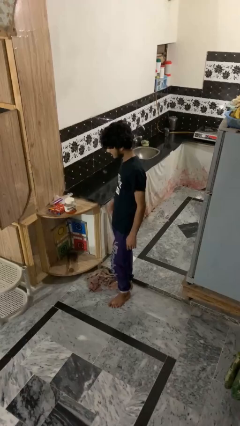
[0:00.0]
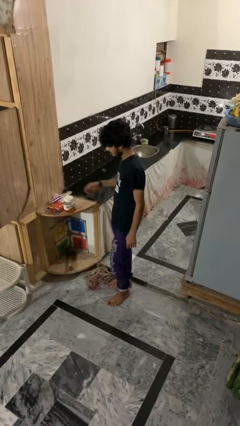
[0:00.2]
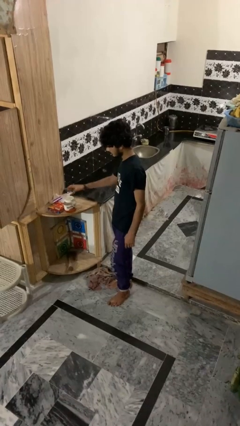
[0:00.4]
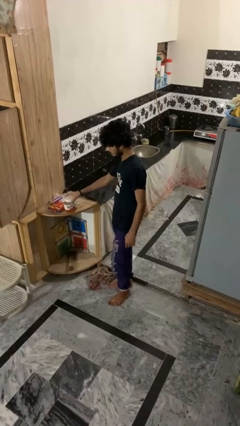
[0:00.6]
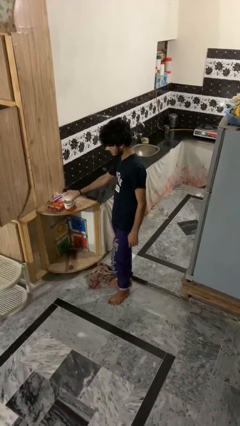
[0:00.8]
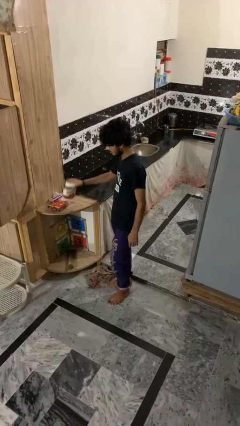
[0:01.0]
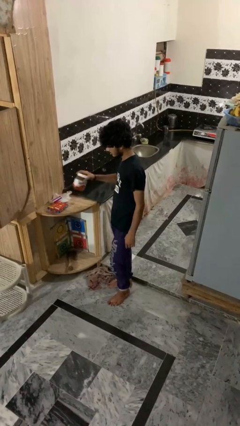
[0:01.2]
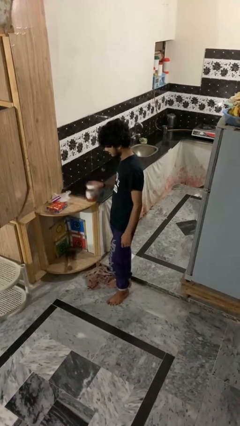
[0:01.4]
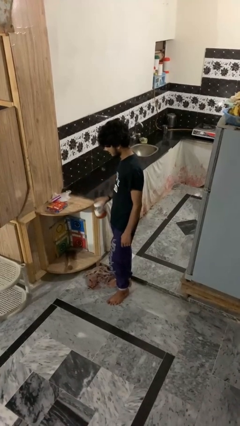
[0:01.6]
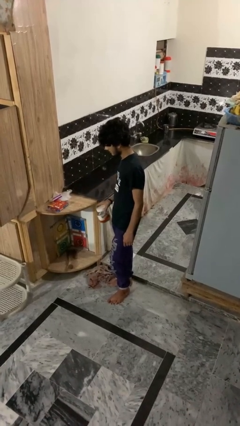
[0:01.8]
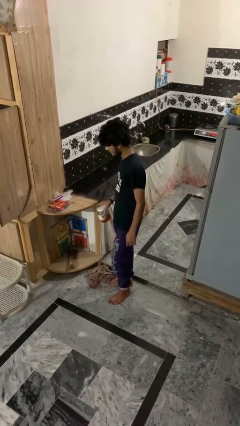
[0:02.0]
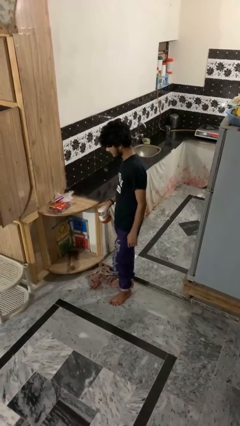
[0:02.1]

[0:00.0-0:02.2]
person picks up object from countertop

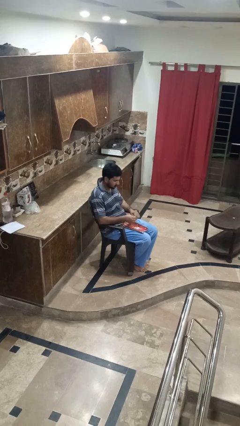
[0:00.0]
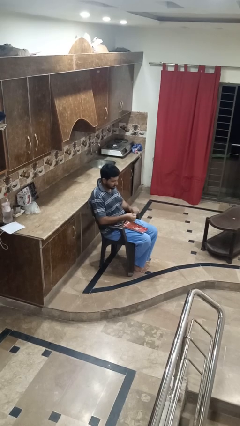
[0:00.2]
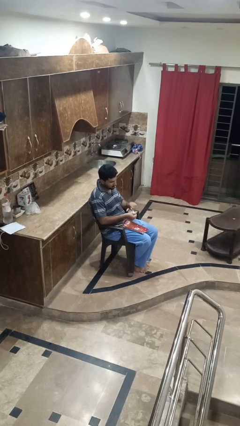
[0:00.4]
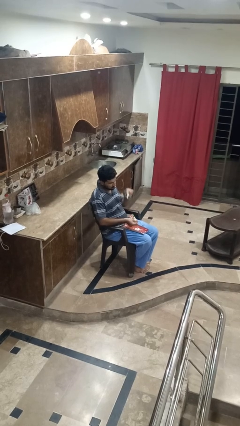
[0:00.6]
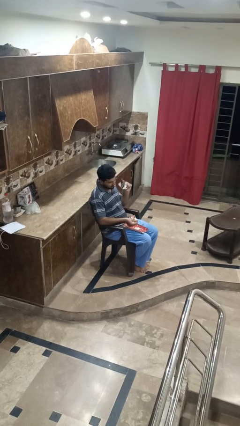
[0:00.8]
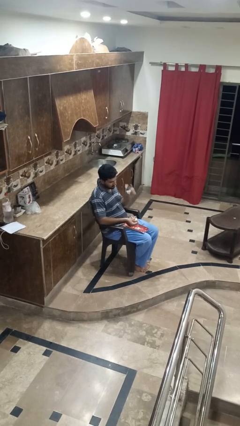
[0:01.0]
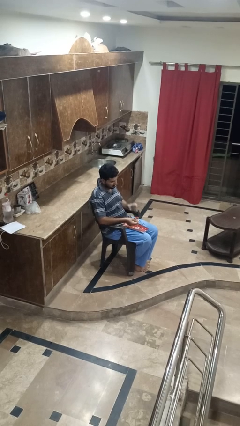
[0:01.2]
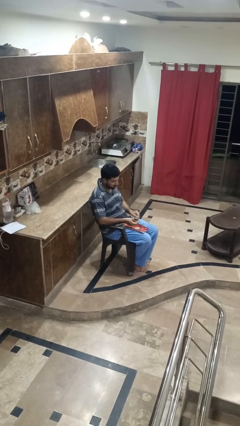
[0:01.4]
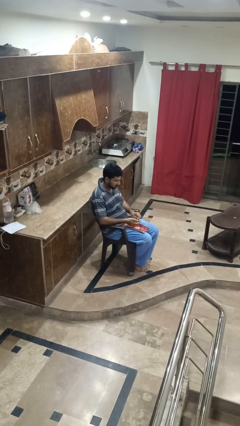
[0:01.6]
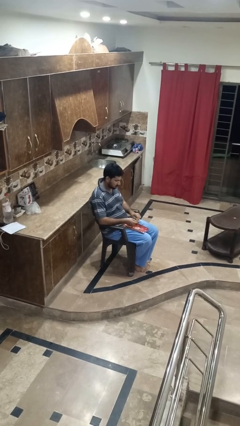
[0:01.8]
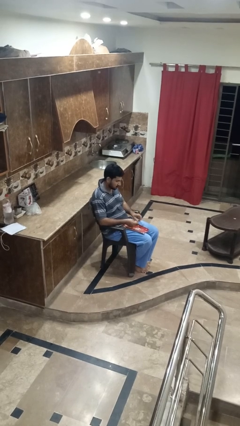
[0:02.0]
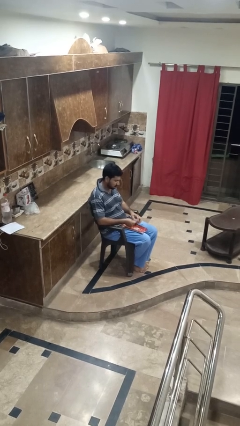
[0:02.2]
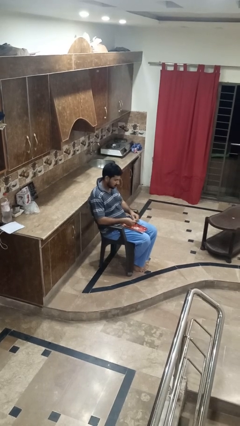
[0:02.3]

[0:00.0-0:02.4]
person tears paper

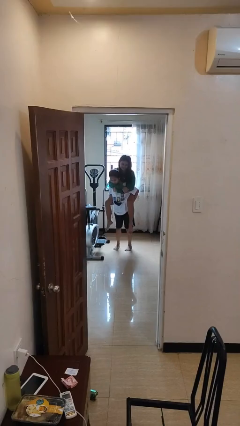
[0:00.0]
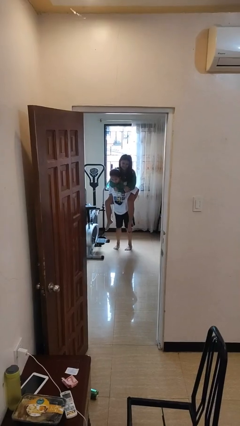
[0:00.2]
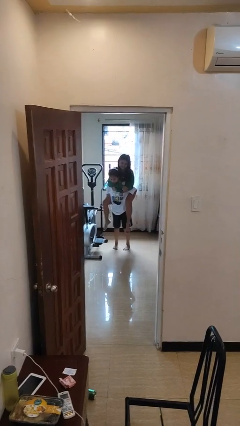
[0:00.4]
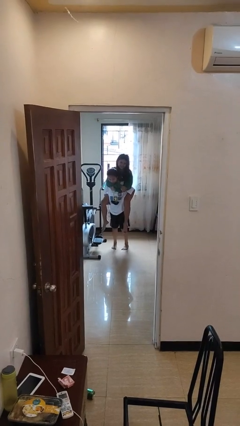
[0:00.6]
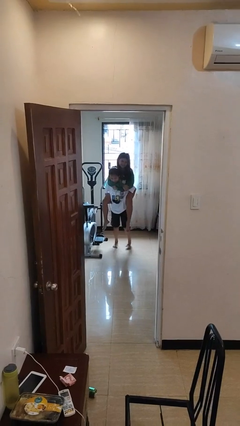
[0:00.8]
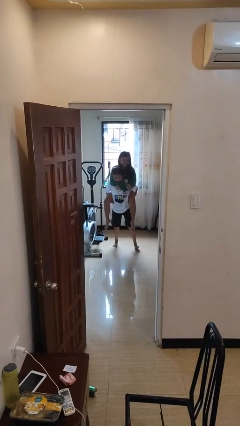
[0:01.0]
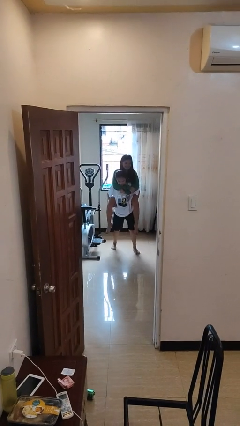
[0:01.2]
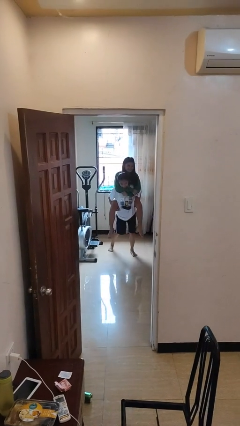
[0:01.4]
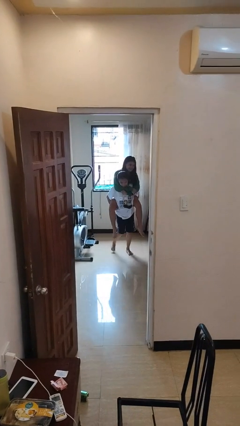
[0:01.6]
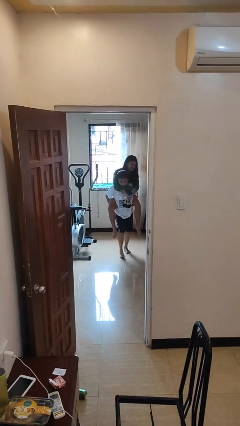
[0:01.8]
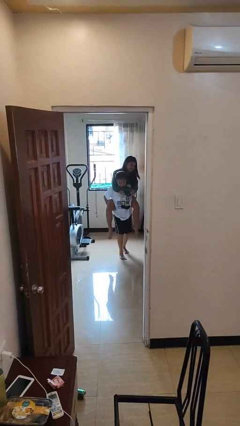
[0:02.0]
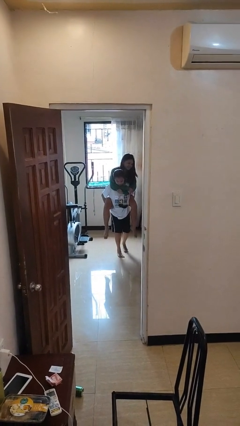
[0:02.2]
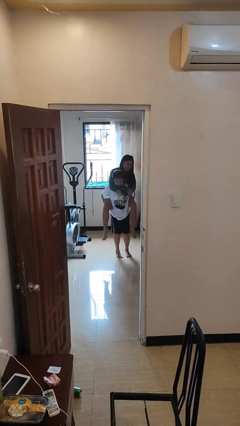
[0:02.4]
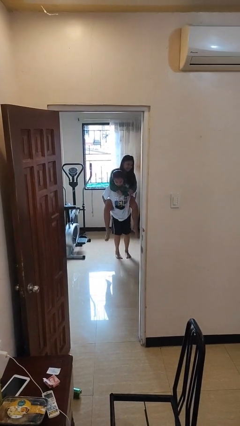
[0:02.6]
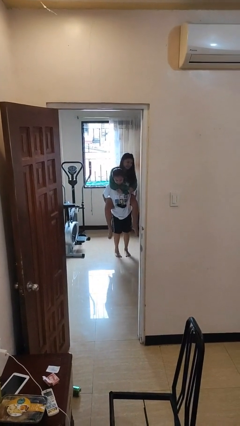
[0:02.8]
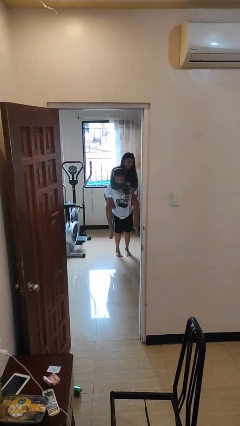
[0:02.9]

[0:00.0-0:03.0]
person carries person on back

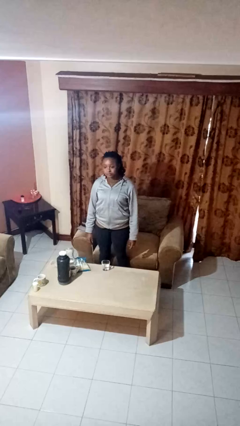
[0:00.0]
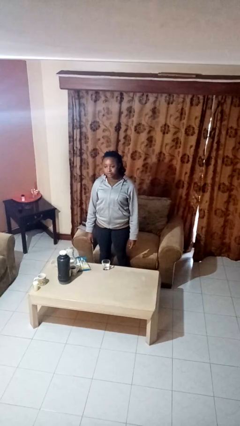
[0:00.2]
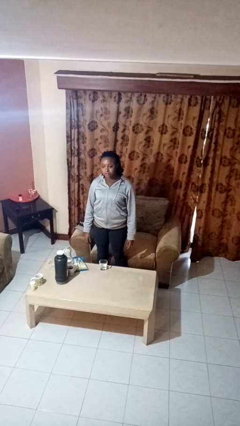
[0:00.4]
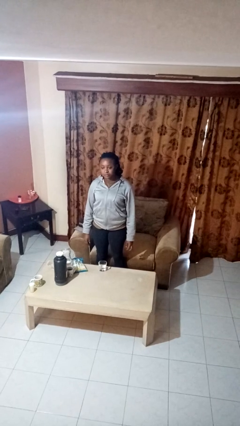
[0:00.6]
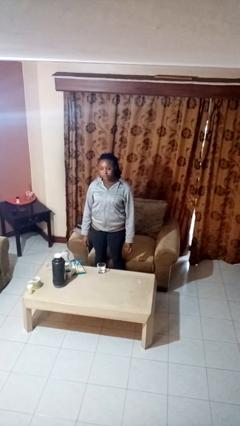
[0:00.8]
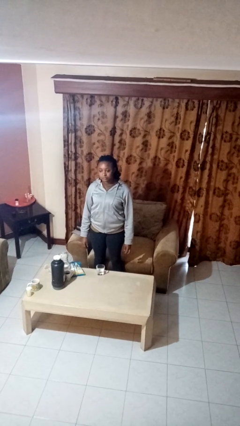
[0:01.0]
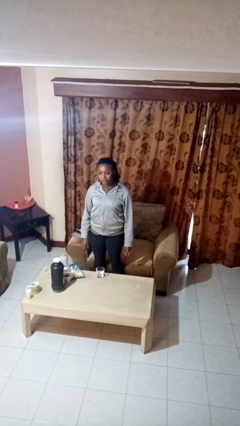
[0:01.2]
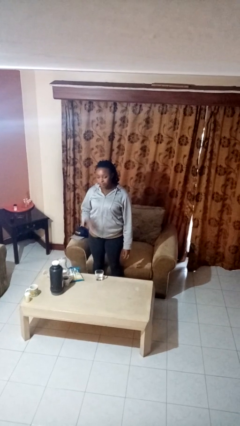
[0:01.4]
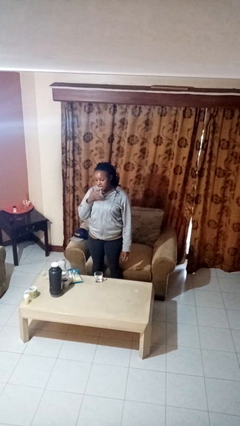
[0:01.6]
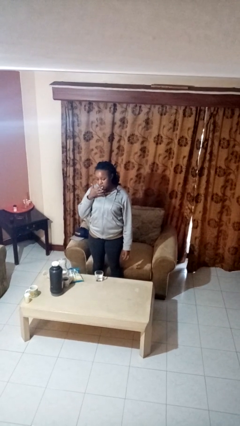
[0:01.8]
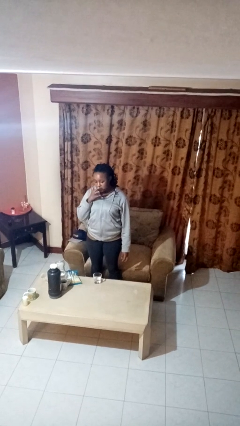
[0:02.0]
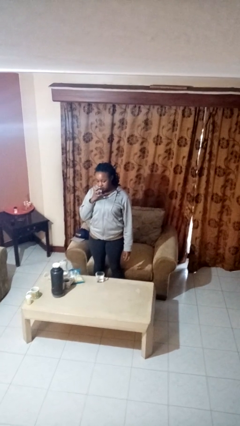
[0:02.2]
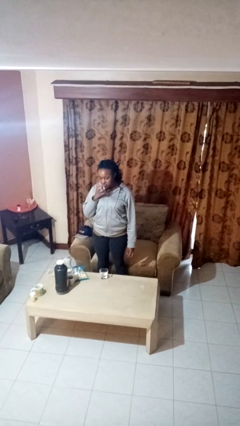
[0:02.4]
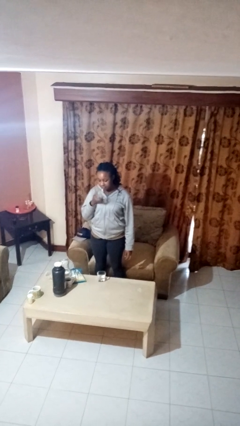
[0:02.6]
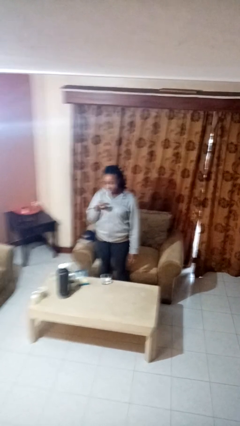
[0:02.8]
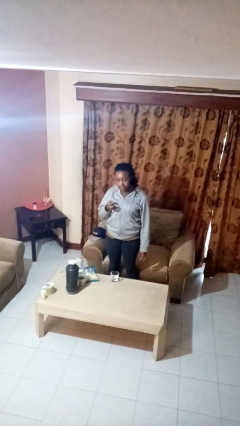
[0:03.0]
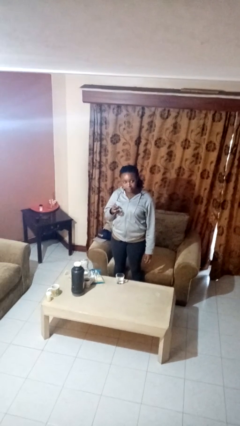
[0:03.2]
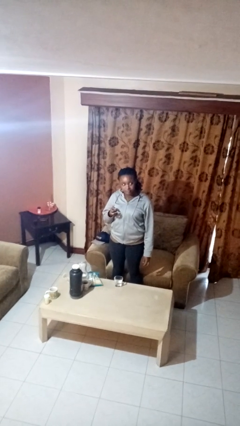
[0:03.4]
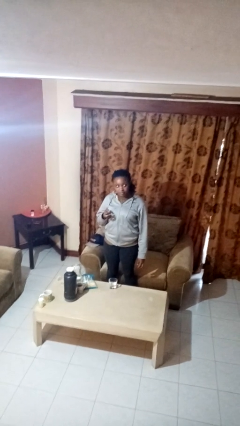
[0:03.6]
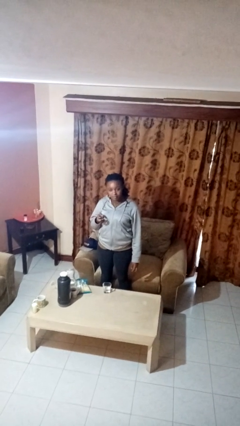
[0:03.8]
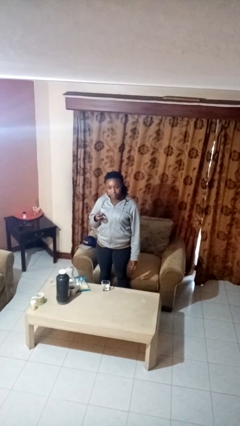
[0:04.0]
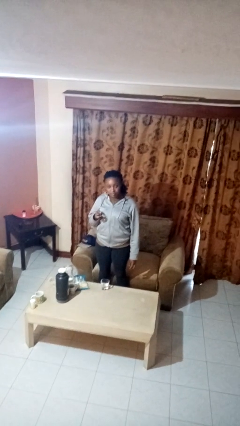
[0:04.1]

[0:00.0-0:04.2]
person licks fingers

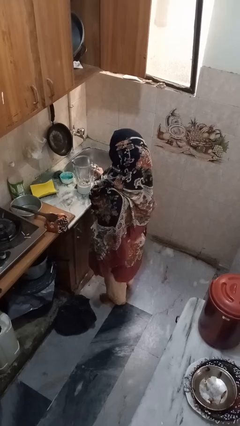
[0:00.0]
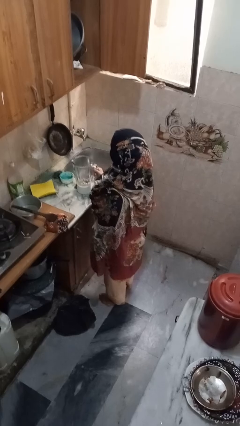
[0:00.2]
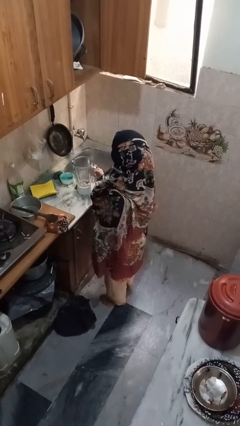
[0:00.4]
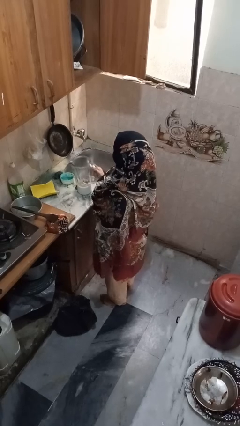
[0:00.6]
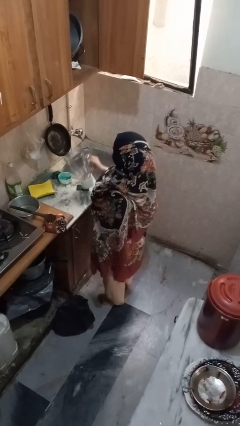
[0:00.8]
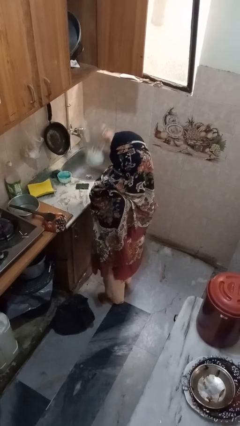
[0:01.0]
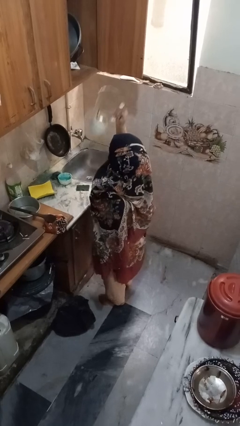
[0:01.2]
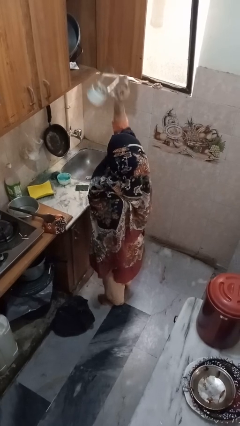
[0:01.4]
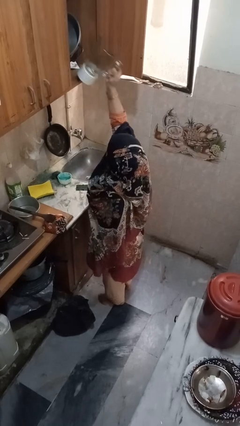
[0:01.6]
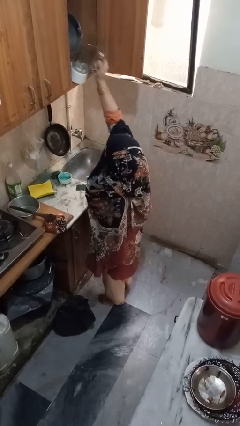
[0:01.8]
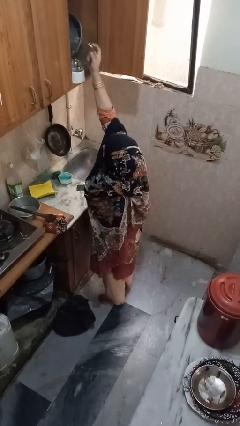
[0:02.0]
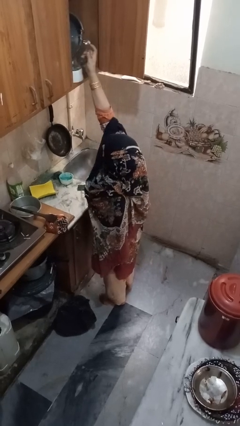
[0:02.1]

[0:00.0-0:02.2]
person takes object from cabinet

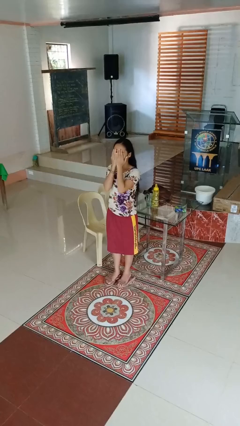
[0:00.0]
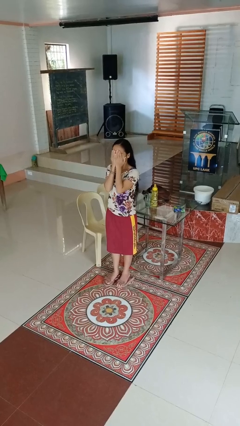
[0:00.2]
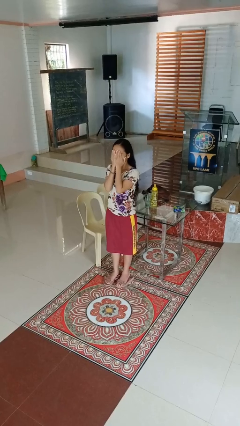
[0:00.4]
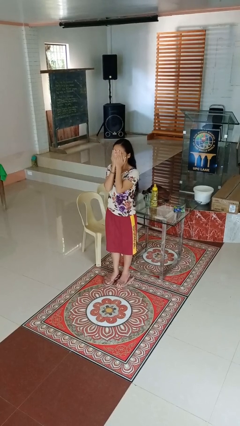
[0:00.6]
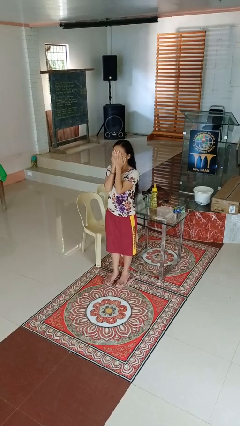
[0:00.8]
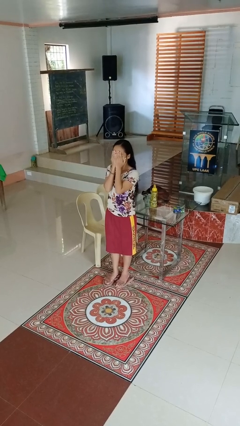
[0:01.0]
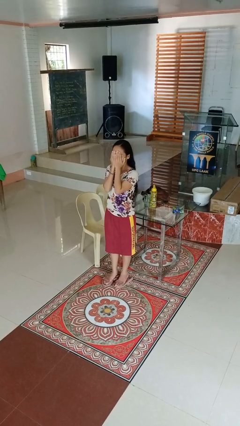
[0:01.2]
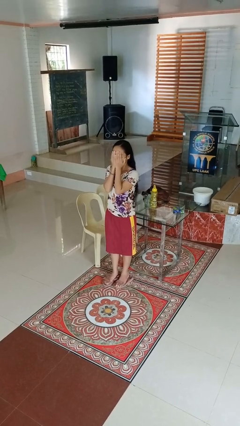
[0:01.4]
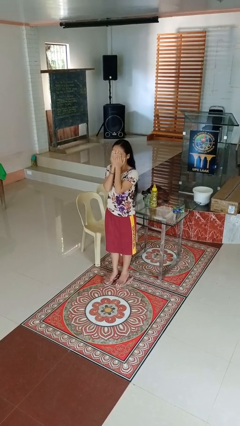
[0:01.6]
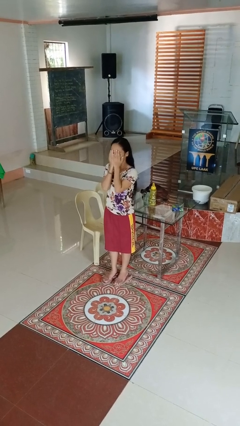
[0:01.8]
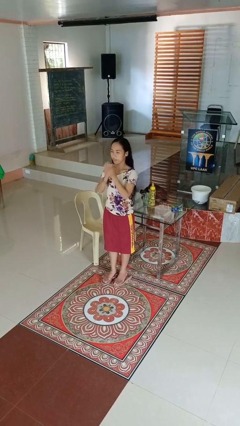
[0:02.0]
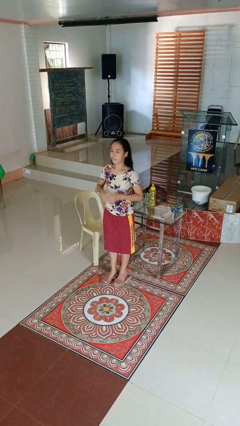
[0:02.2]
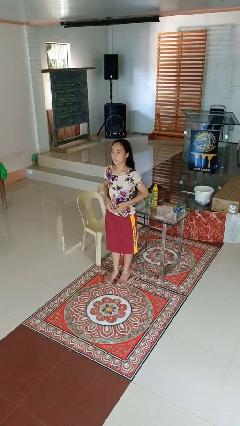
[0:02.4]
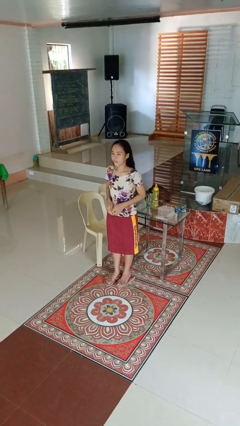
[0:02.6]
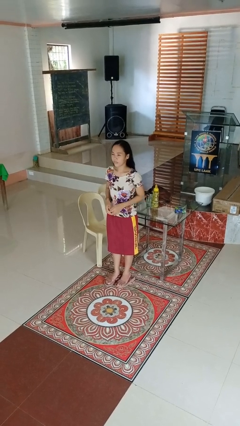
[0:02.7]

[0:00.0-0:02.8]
person covers face with hands

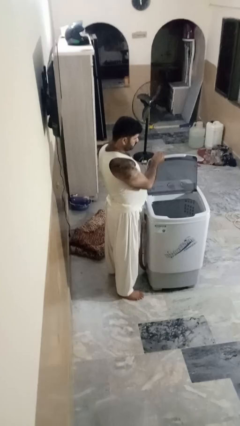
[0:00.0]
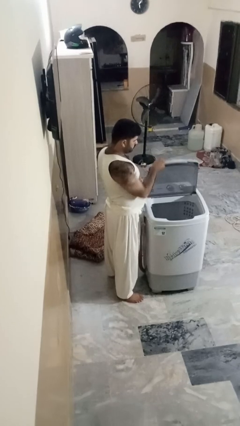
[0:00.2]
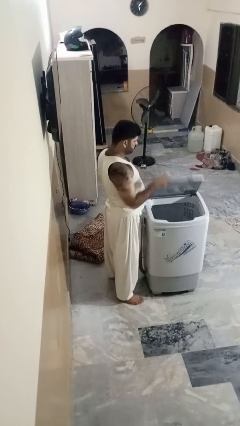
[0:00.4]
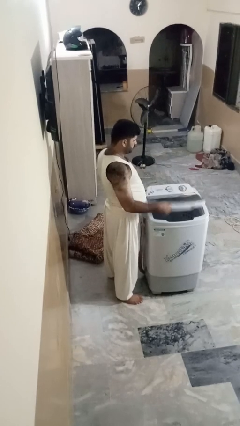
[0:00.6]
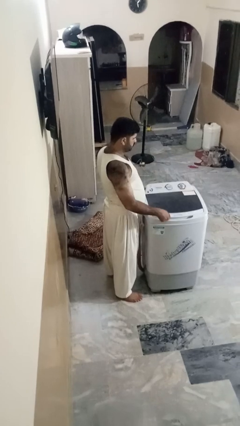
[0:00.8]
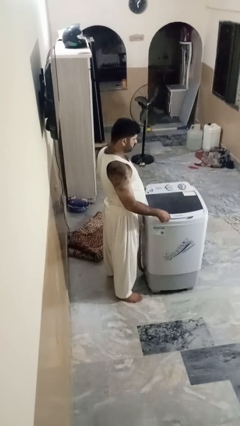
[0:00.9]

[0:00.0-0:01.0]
person closes clothes washer
